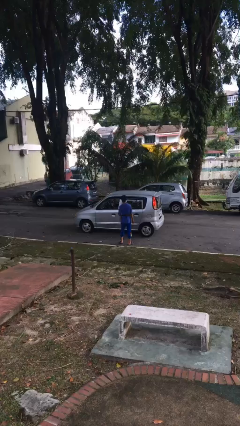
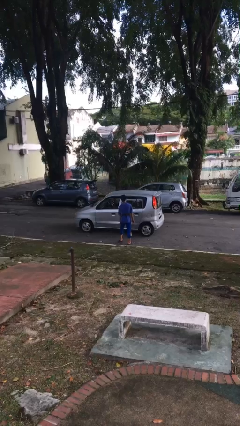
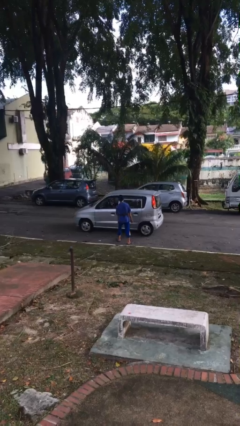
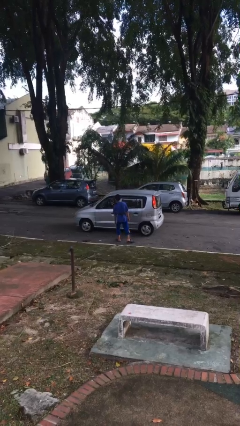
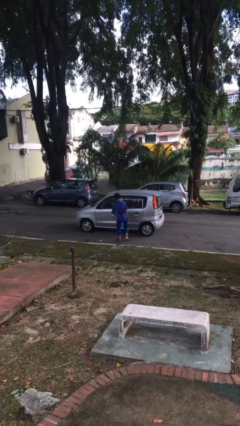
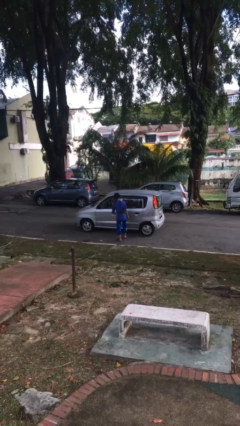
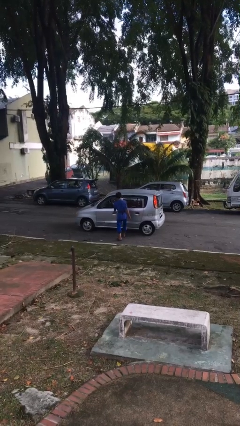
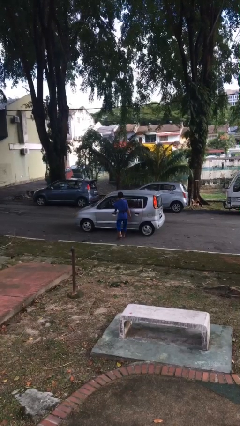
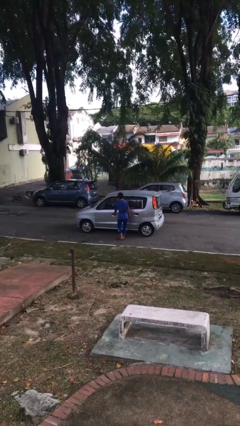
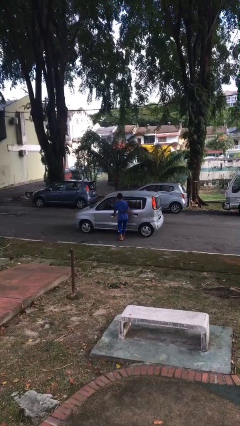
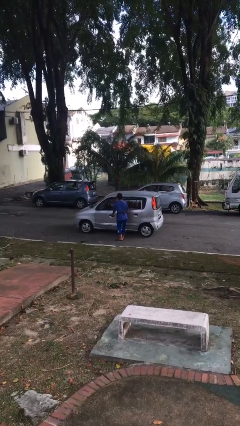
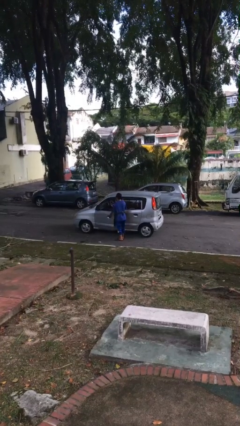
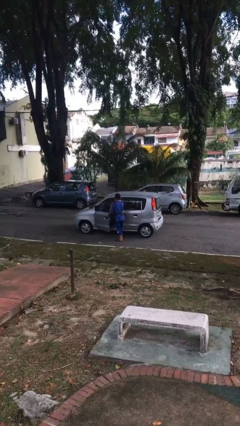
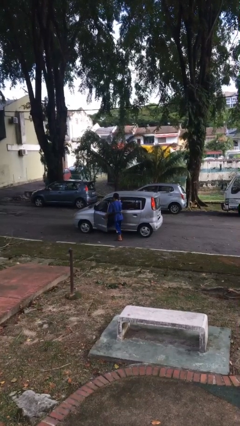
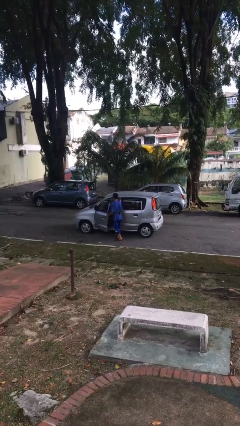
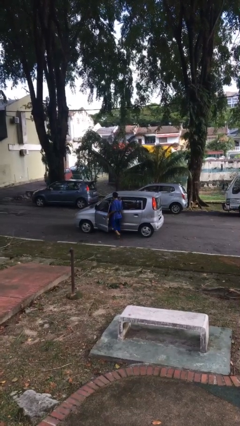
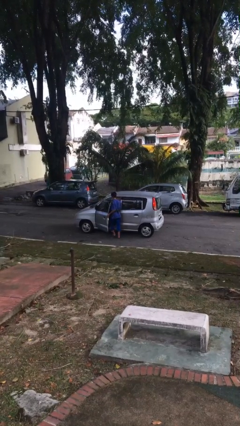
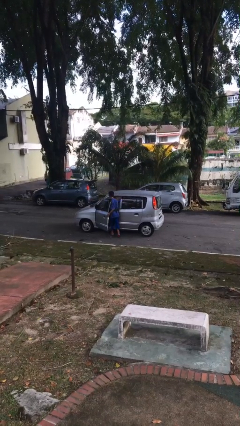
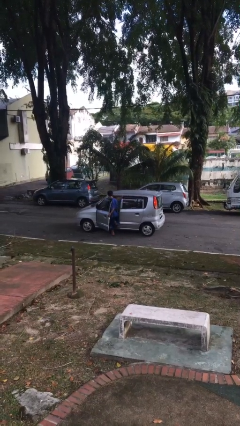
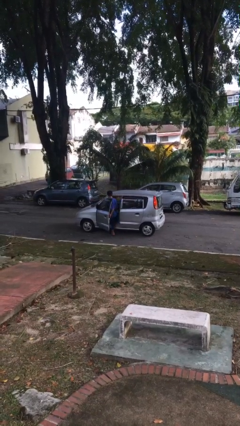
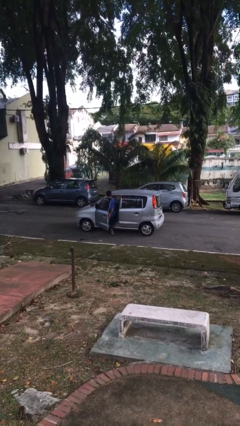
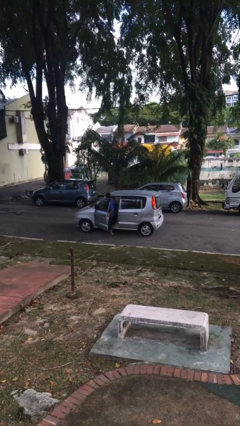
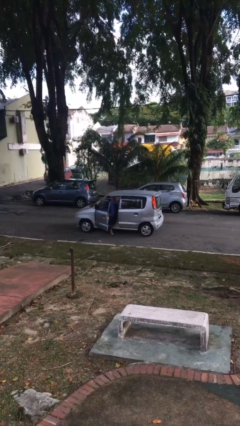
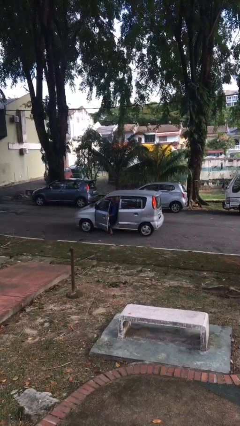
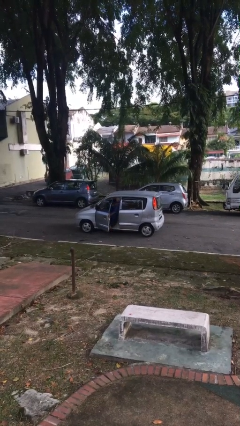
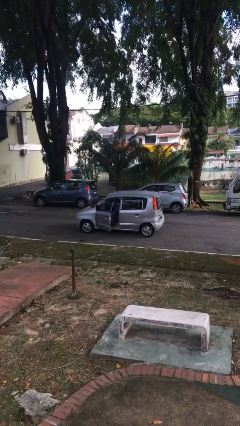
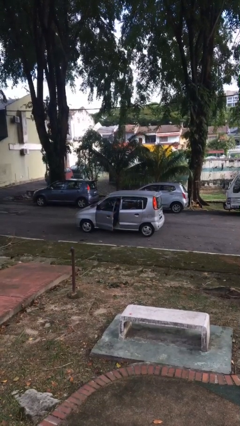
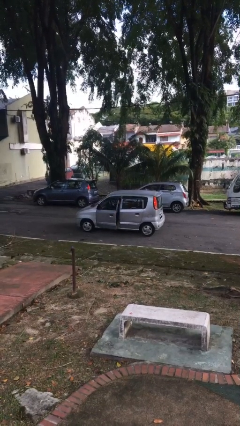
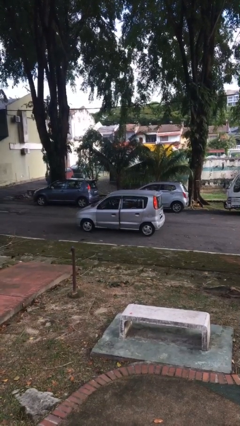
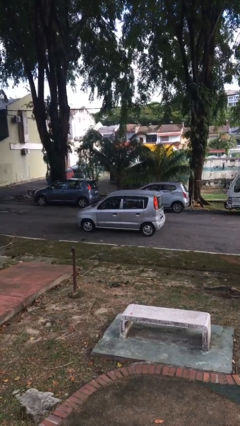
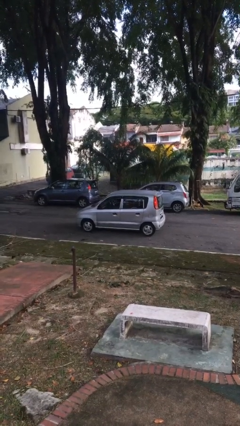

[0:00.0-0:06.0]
car picks up person

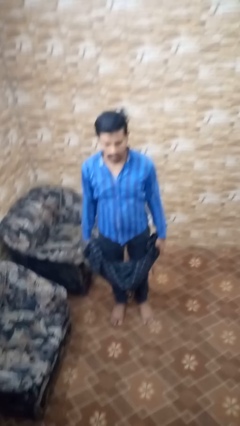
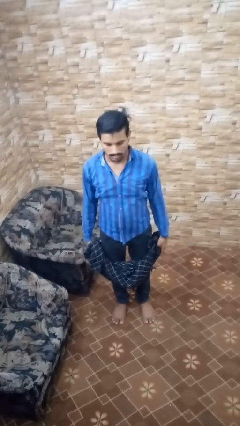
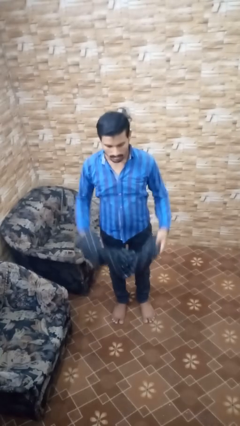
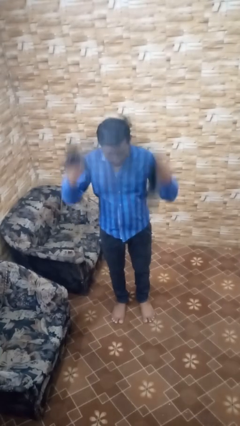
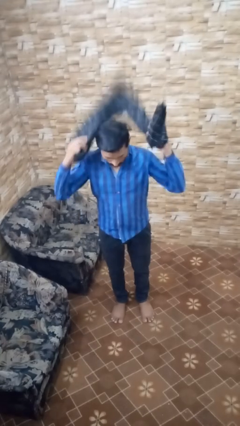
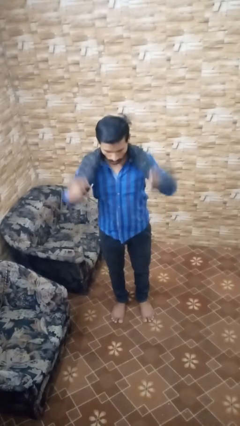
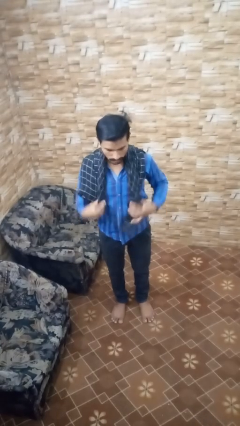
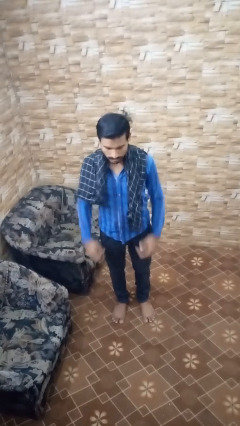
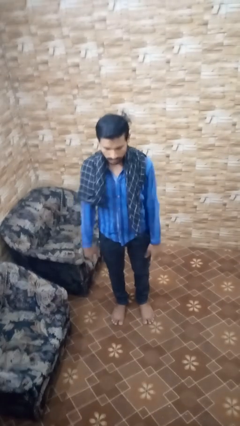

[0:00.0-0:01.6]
person puts on scarf

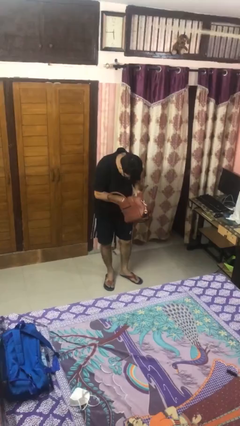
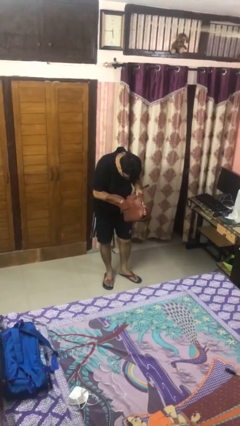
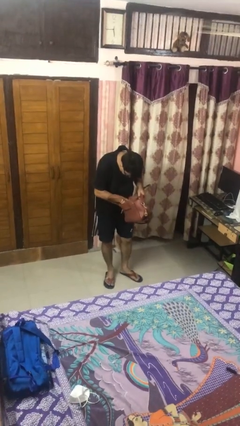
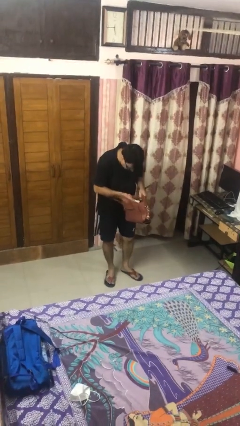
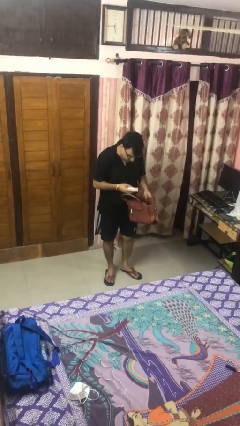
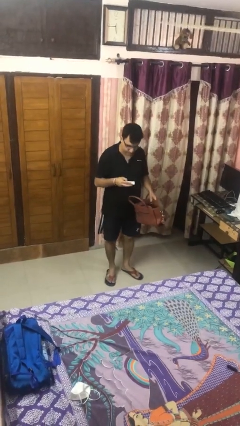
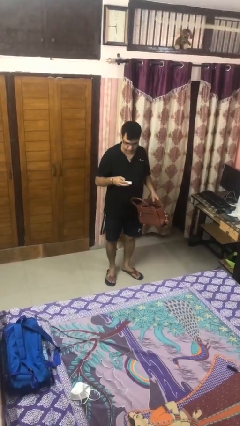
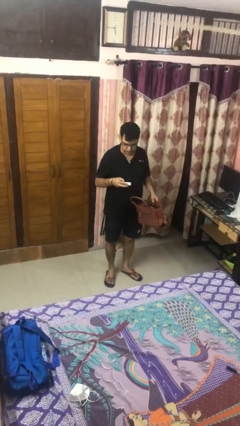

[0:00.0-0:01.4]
person takes object from purse

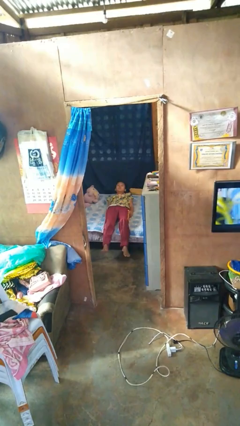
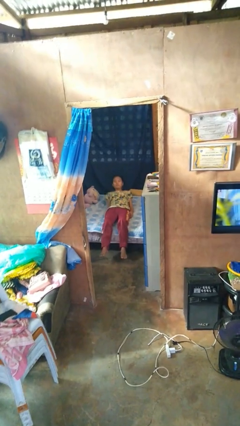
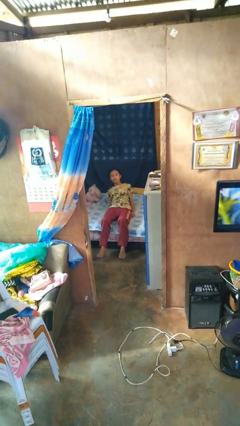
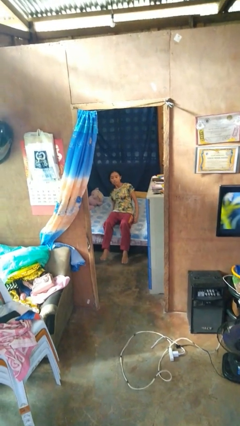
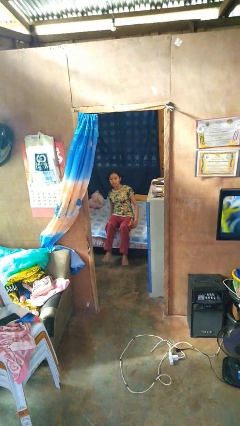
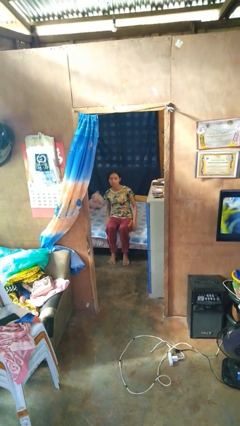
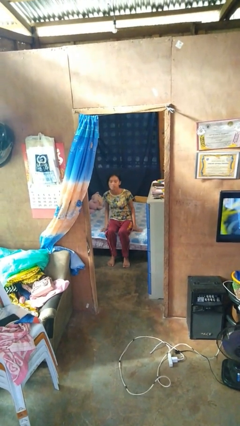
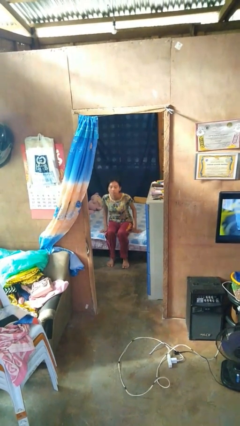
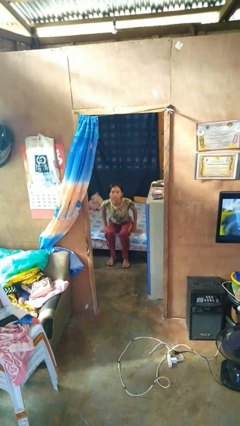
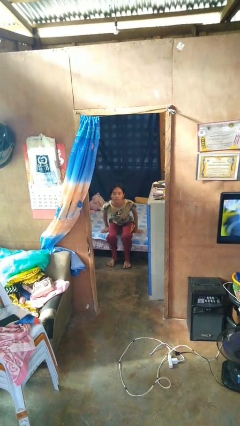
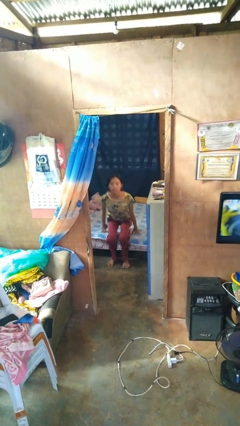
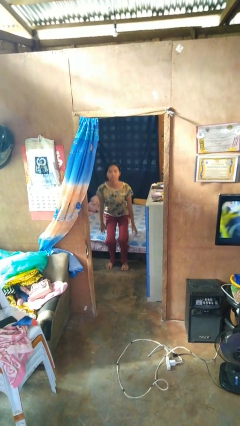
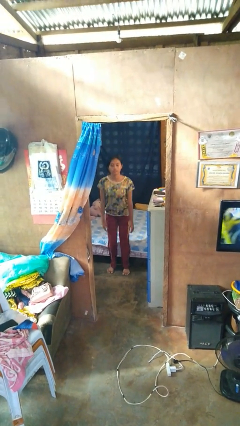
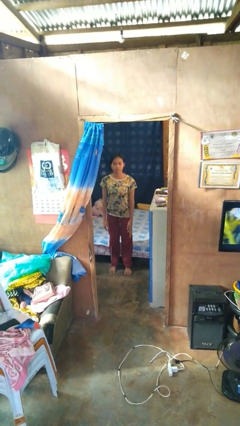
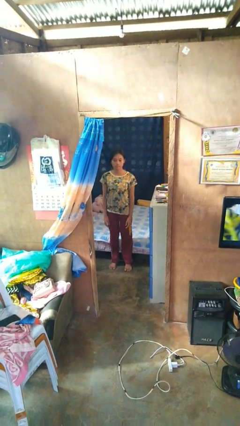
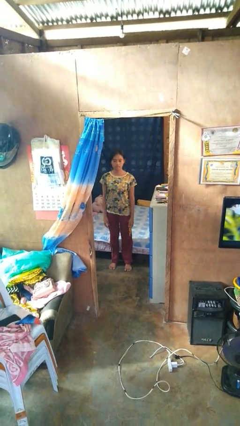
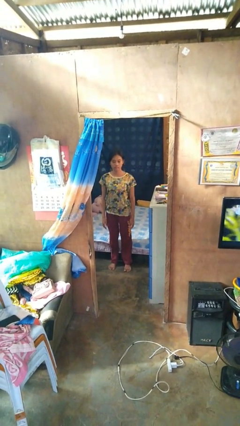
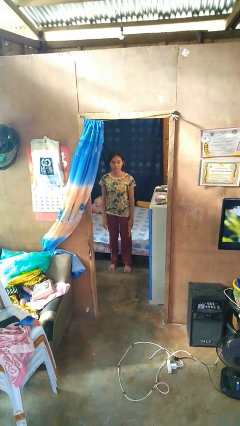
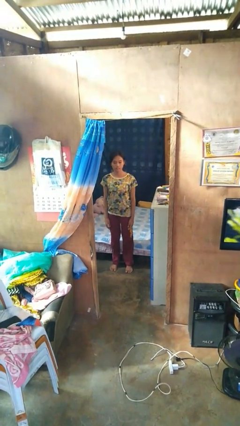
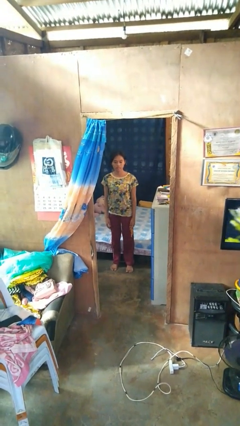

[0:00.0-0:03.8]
person stands up

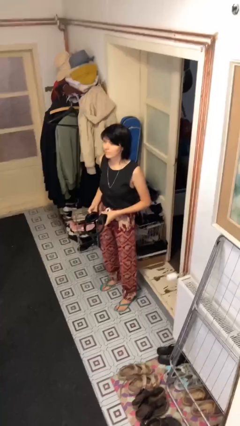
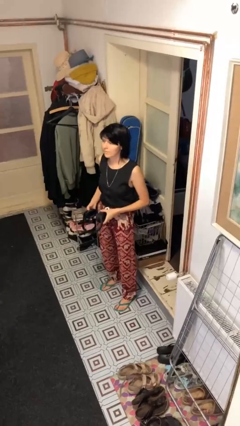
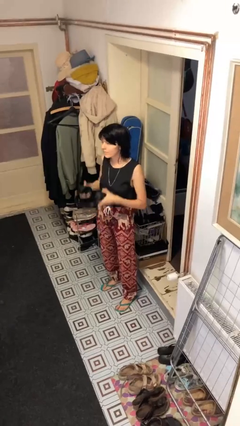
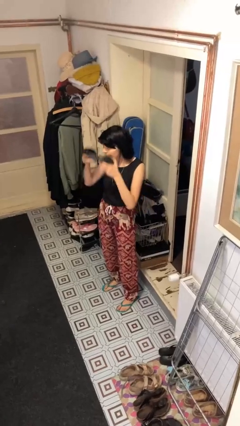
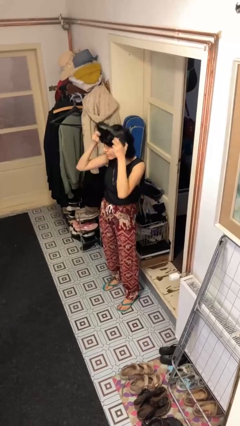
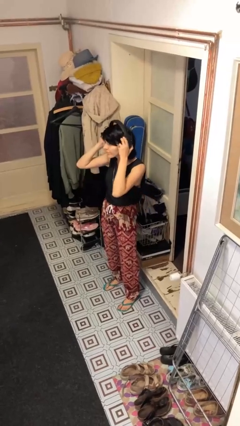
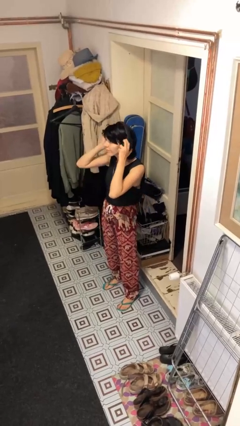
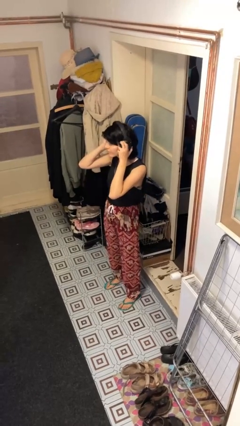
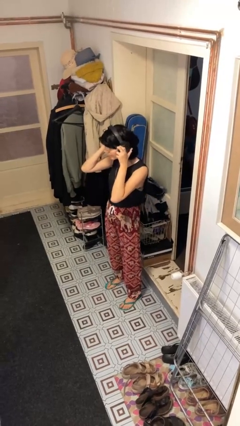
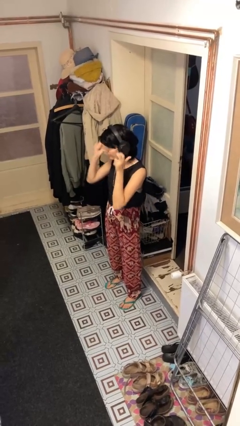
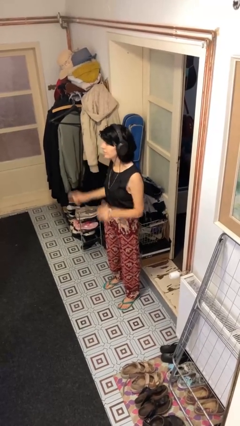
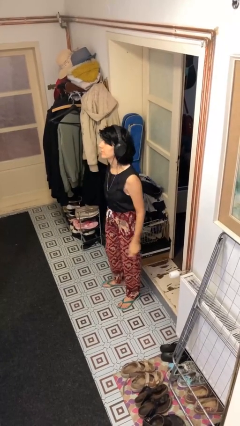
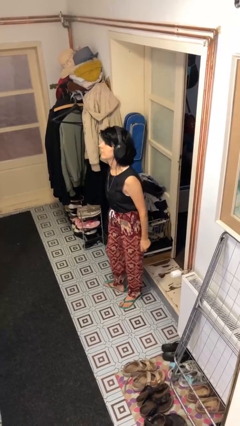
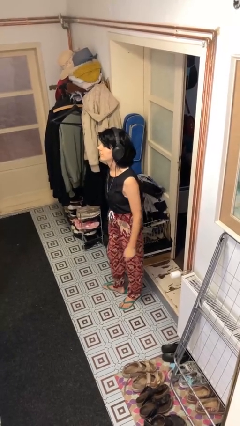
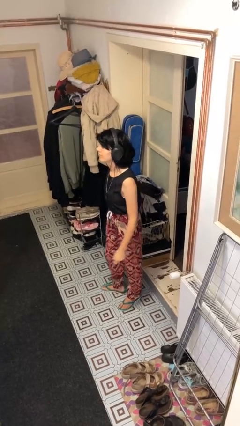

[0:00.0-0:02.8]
person puts on headphones

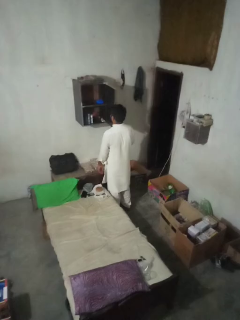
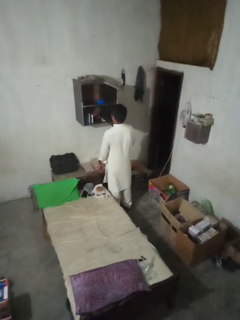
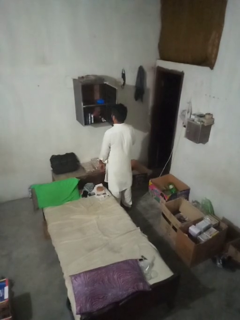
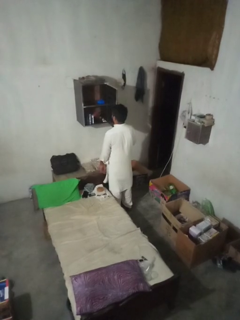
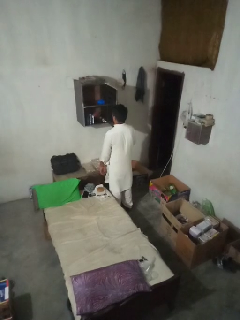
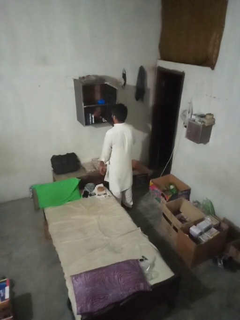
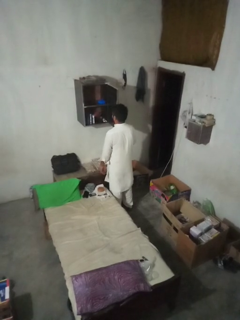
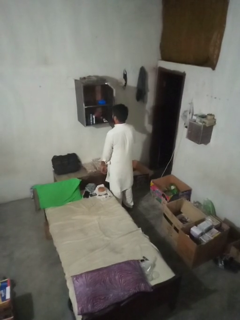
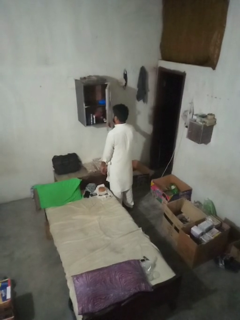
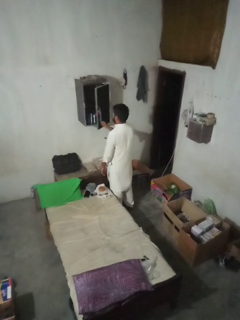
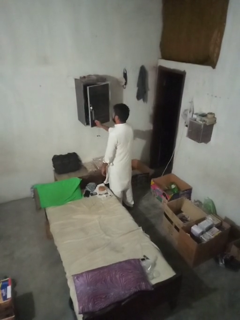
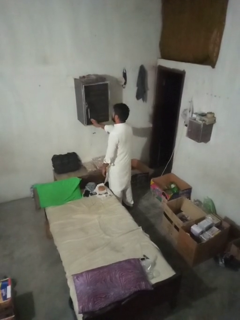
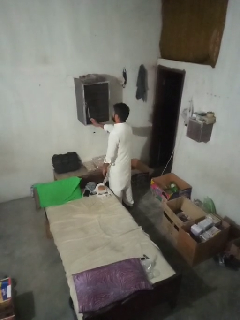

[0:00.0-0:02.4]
person closes closet door

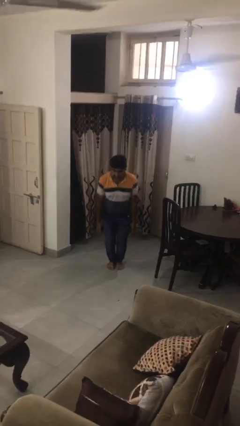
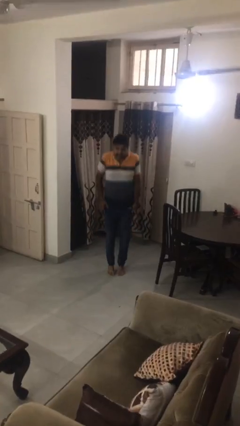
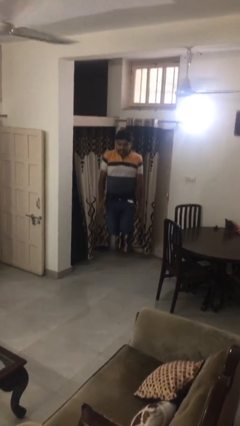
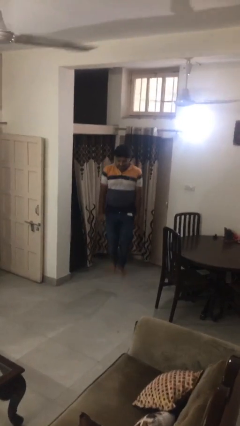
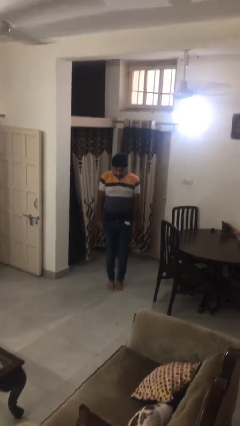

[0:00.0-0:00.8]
person jumps
